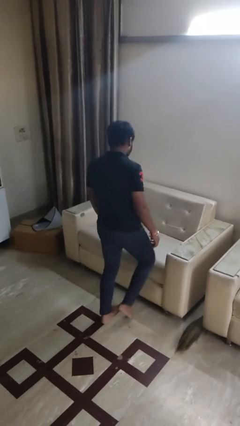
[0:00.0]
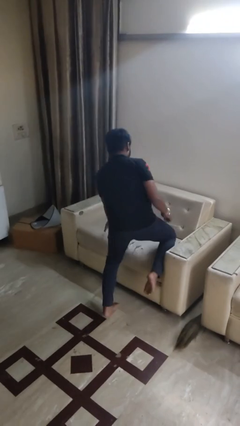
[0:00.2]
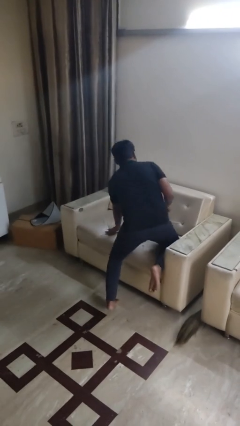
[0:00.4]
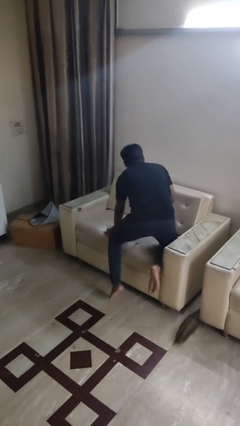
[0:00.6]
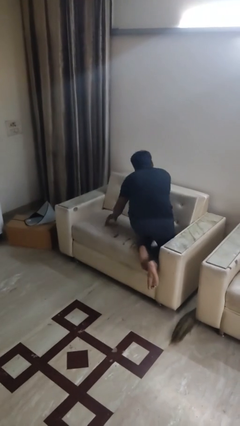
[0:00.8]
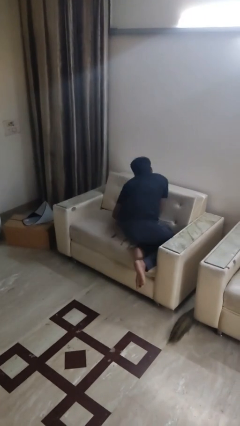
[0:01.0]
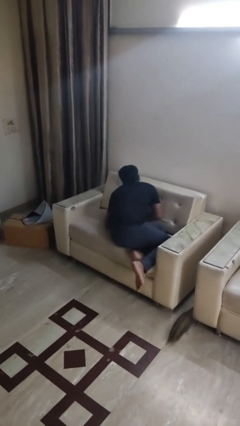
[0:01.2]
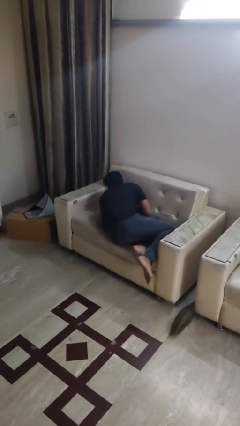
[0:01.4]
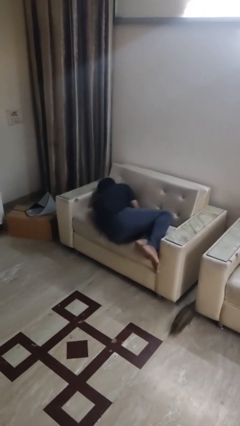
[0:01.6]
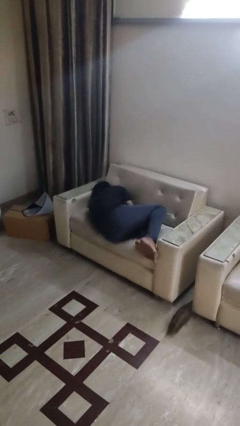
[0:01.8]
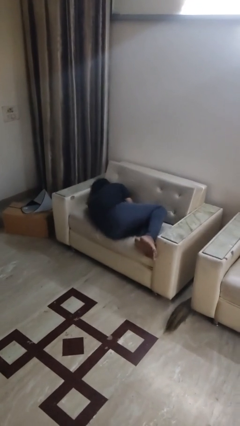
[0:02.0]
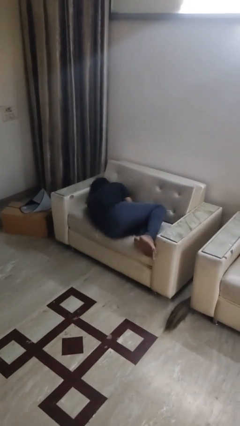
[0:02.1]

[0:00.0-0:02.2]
person lies down on bed

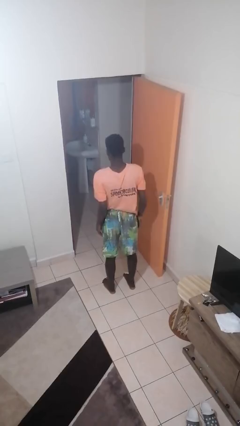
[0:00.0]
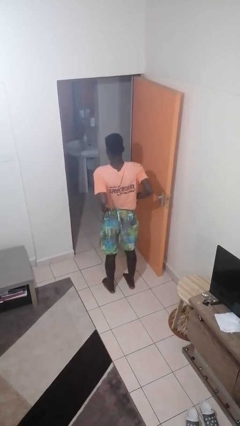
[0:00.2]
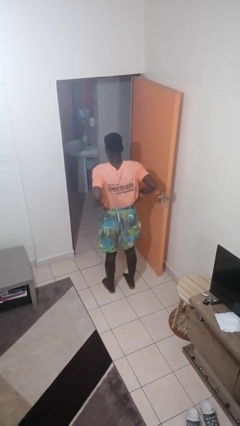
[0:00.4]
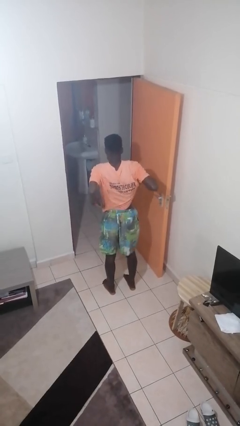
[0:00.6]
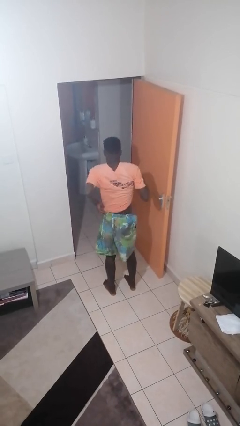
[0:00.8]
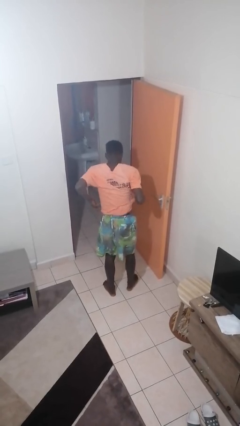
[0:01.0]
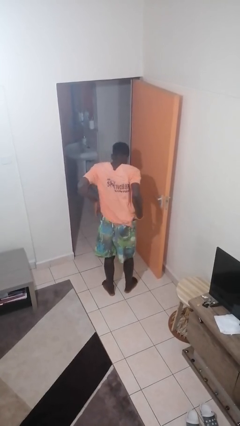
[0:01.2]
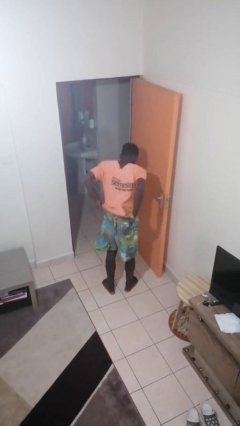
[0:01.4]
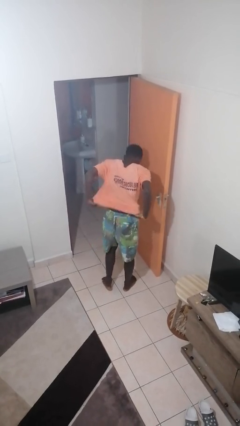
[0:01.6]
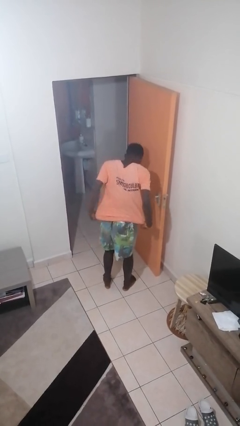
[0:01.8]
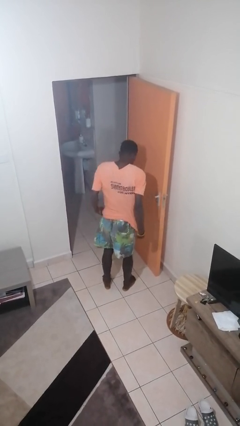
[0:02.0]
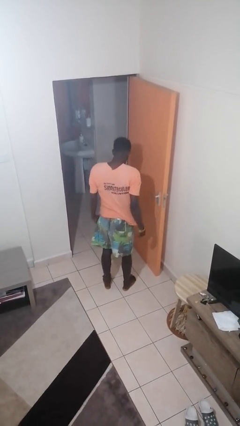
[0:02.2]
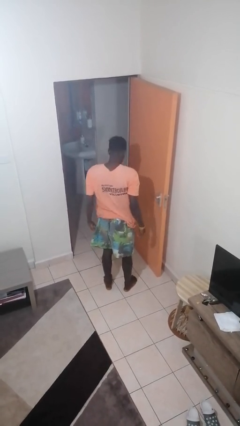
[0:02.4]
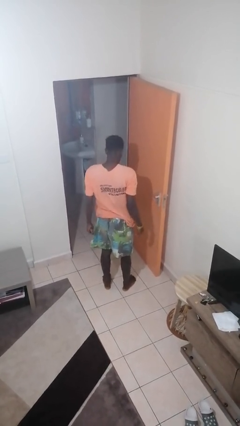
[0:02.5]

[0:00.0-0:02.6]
person untucks shirt

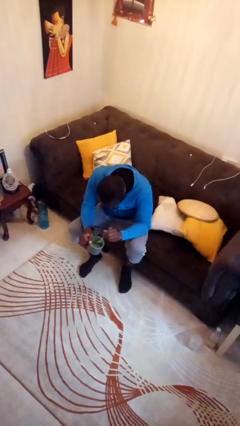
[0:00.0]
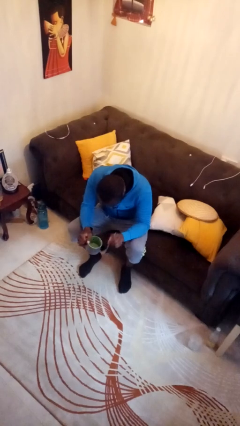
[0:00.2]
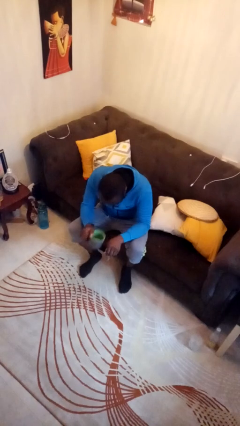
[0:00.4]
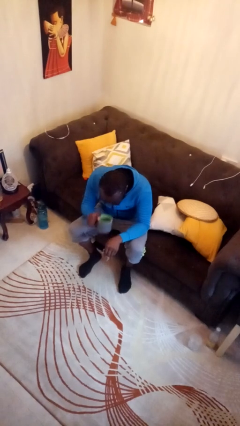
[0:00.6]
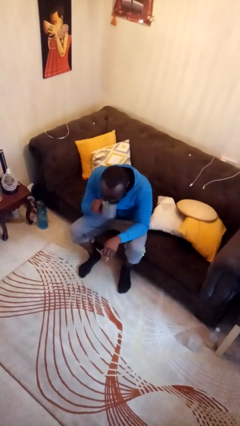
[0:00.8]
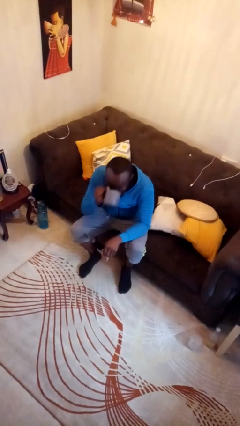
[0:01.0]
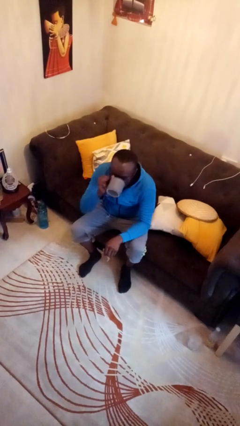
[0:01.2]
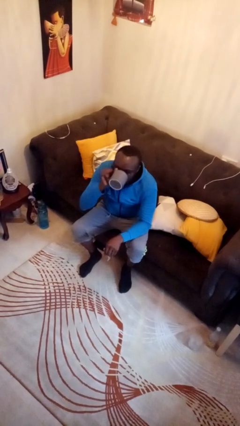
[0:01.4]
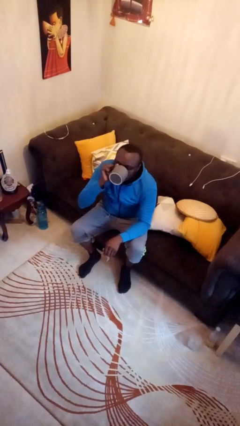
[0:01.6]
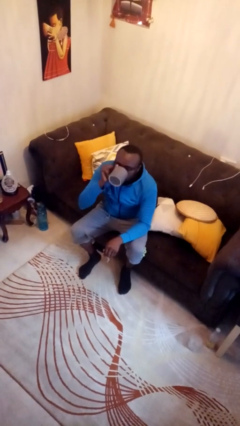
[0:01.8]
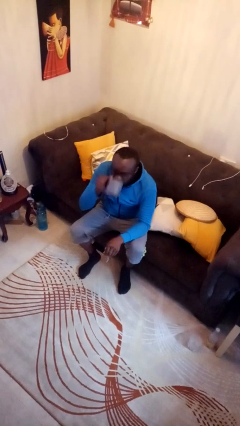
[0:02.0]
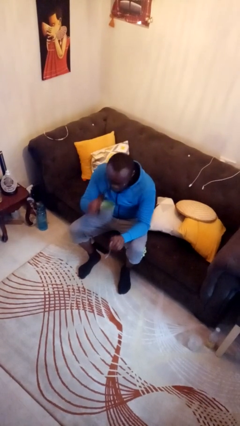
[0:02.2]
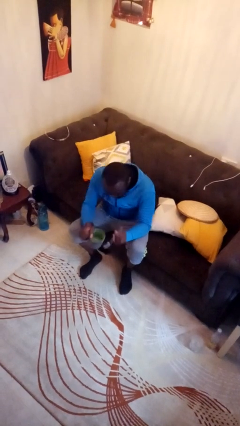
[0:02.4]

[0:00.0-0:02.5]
person drinks from mug

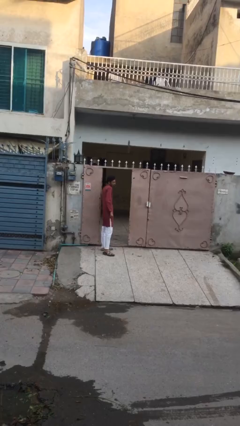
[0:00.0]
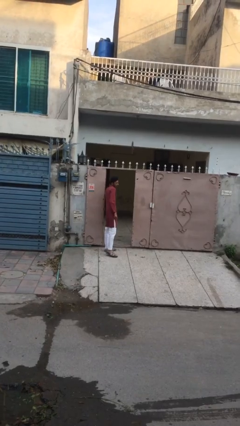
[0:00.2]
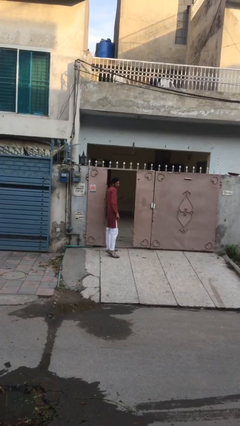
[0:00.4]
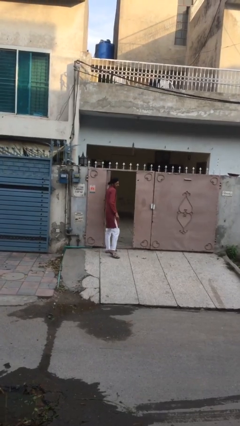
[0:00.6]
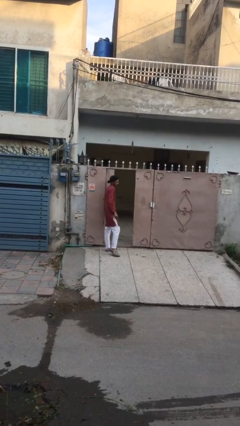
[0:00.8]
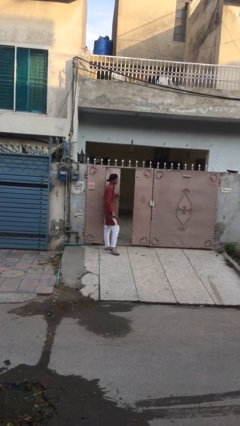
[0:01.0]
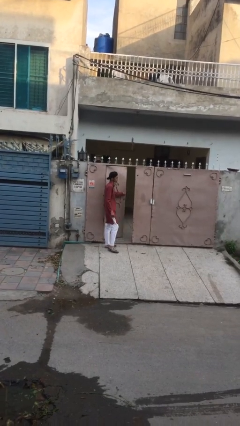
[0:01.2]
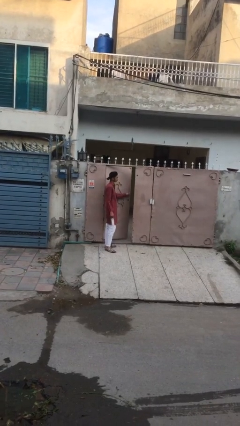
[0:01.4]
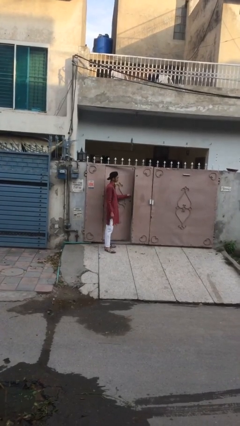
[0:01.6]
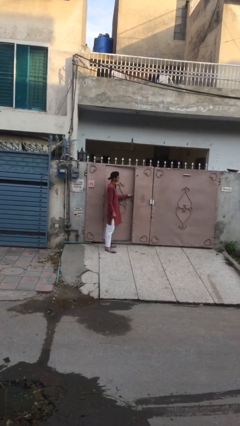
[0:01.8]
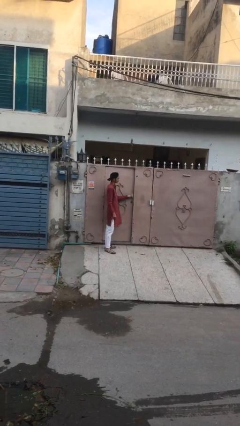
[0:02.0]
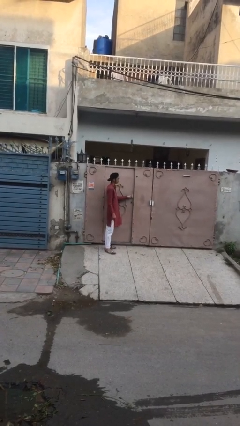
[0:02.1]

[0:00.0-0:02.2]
person closes facility door

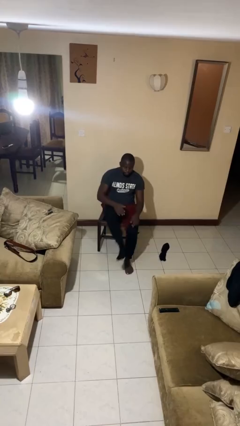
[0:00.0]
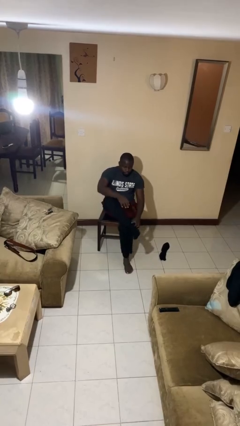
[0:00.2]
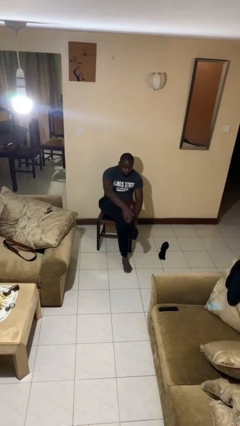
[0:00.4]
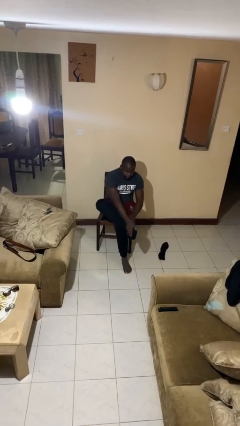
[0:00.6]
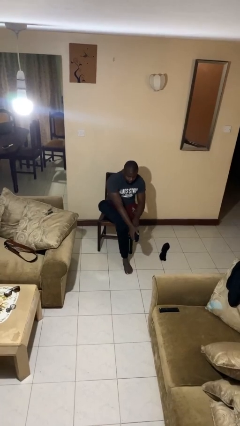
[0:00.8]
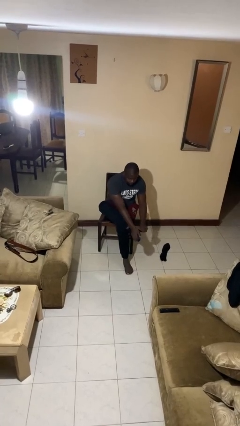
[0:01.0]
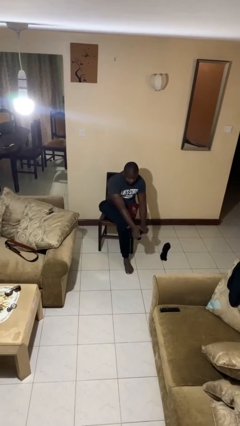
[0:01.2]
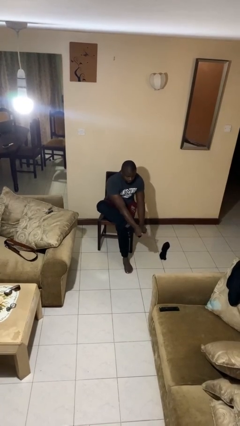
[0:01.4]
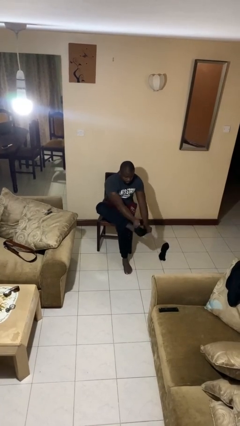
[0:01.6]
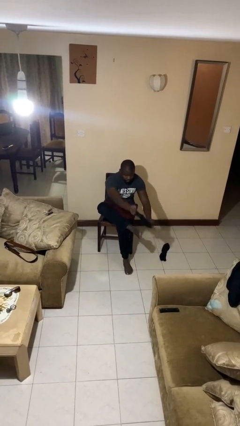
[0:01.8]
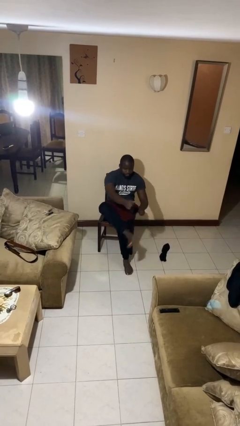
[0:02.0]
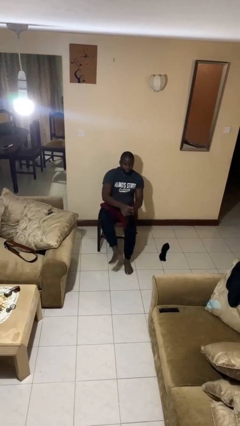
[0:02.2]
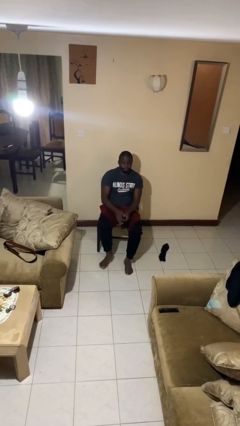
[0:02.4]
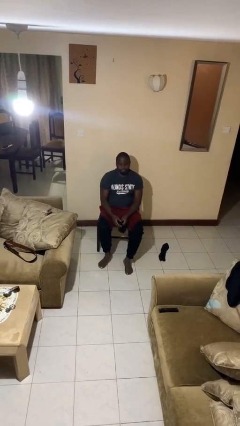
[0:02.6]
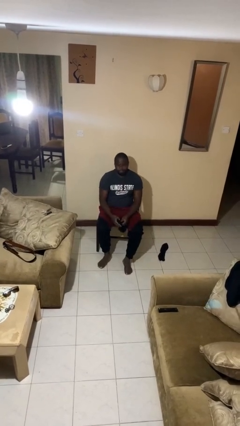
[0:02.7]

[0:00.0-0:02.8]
person takes off socks

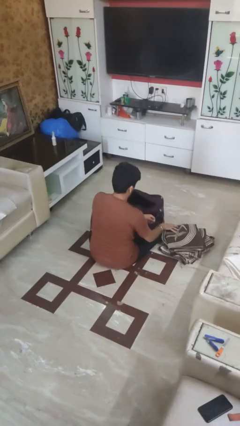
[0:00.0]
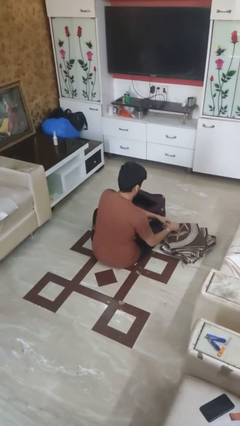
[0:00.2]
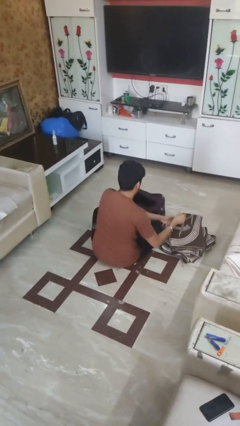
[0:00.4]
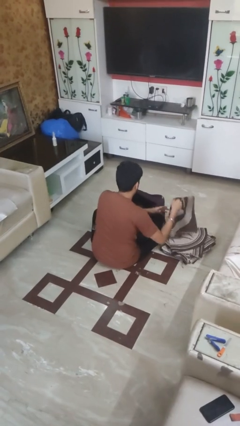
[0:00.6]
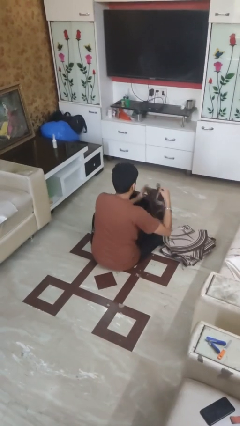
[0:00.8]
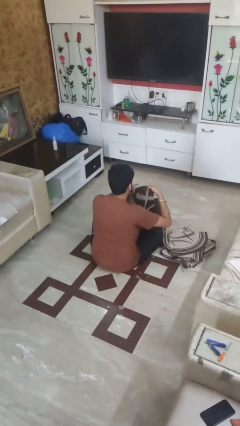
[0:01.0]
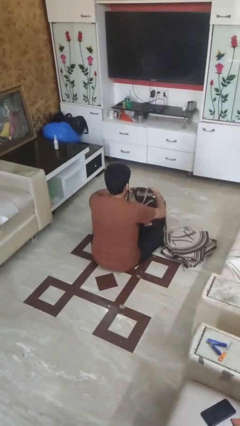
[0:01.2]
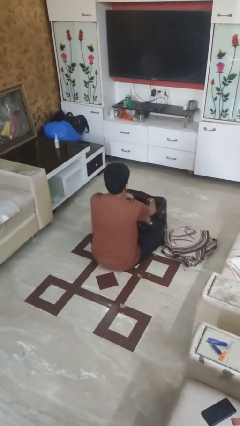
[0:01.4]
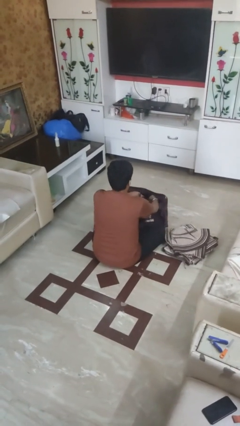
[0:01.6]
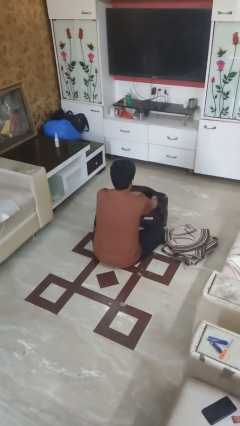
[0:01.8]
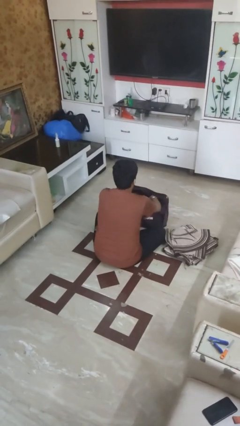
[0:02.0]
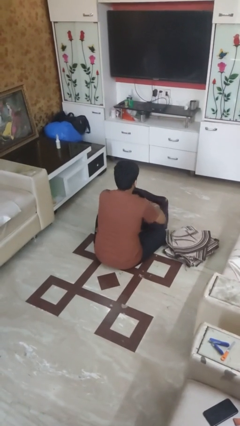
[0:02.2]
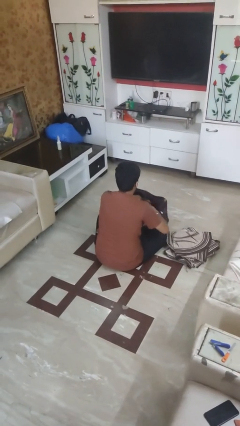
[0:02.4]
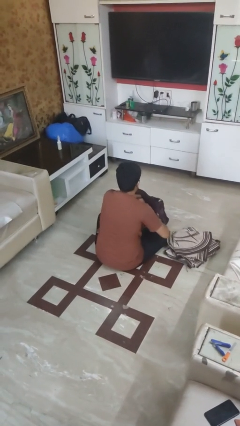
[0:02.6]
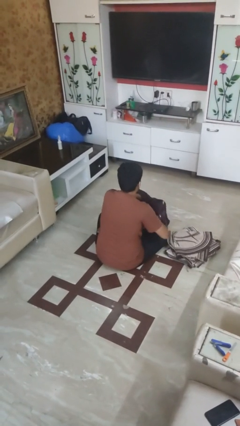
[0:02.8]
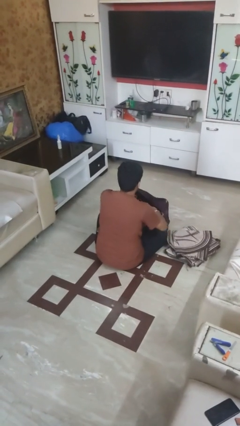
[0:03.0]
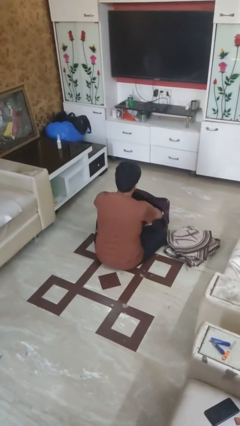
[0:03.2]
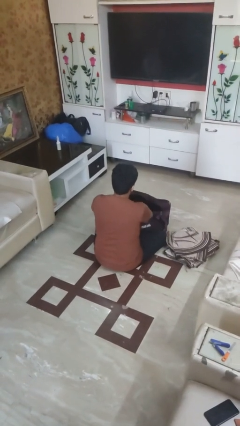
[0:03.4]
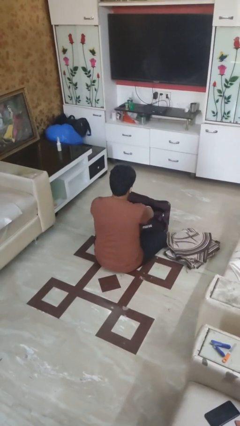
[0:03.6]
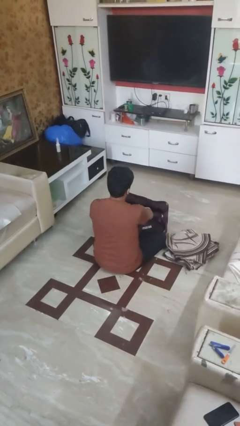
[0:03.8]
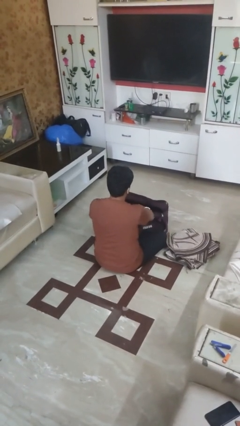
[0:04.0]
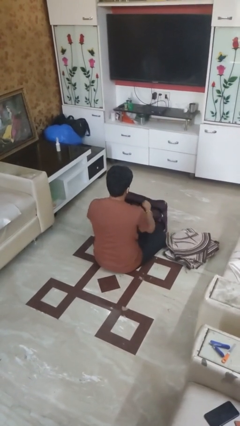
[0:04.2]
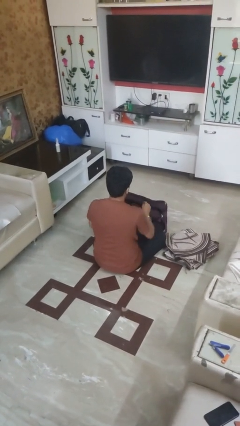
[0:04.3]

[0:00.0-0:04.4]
person loads clothes into suitcase

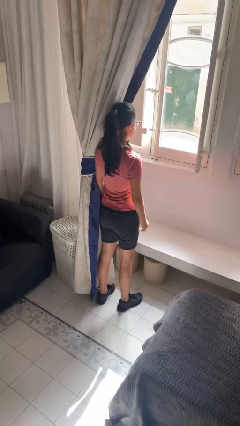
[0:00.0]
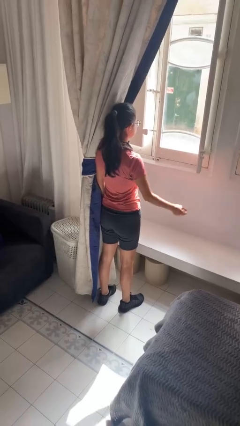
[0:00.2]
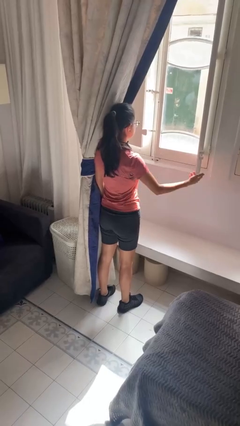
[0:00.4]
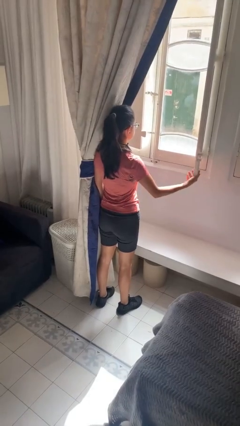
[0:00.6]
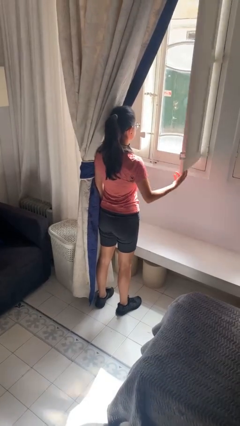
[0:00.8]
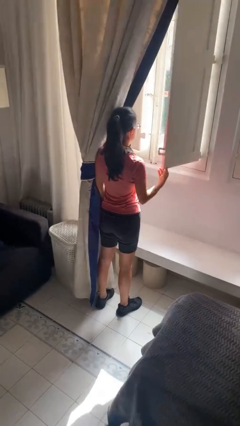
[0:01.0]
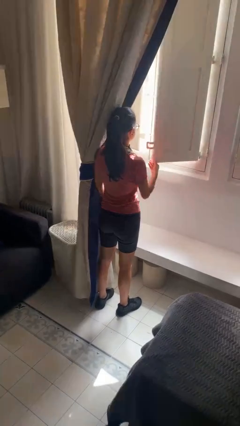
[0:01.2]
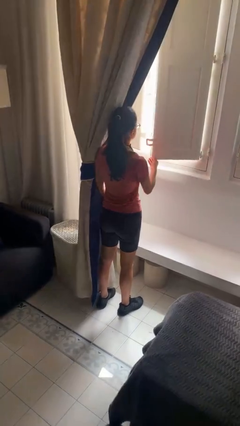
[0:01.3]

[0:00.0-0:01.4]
person closes home window
